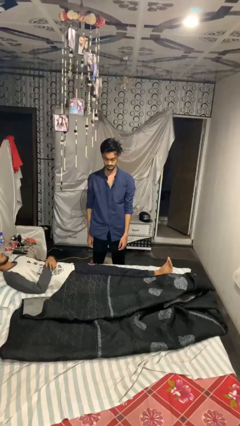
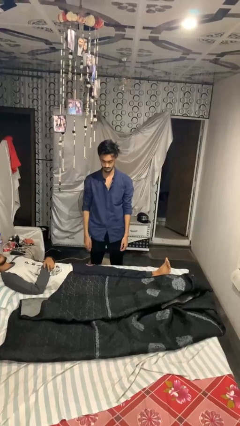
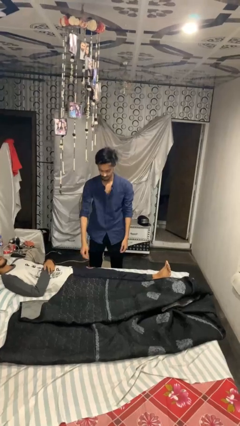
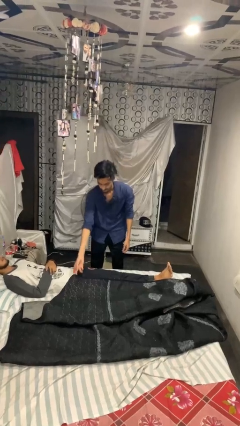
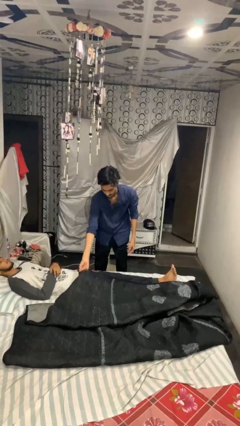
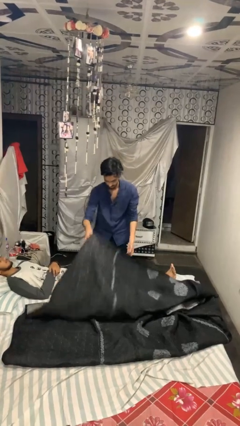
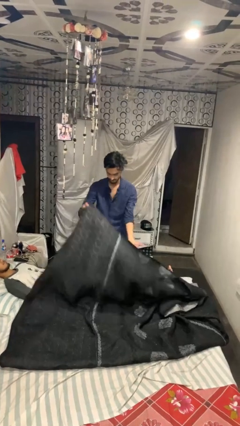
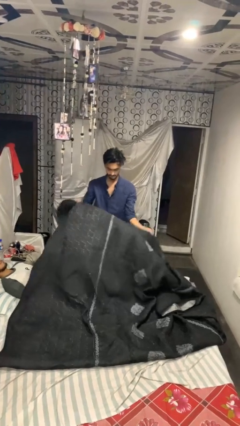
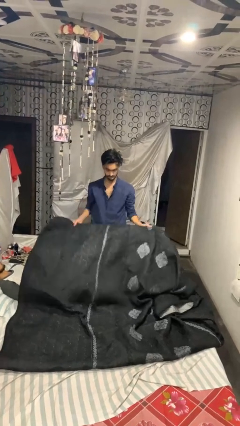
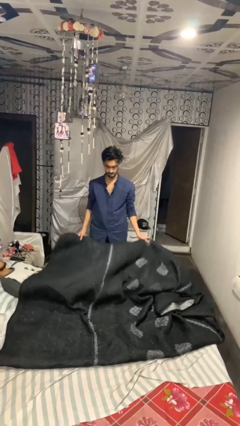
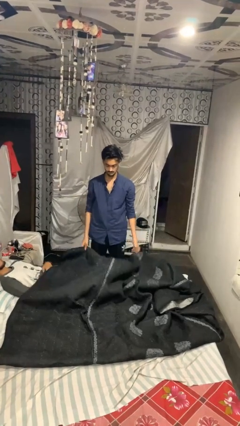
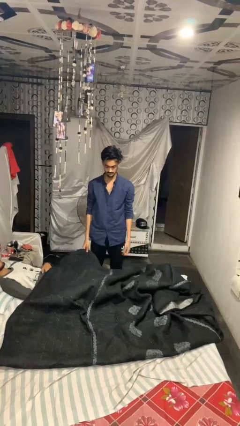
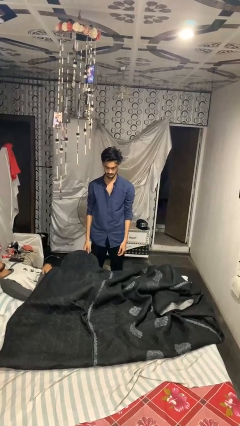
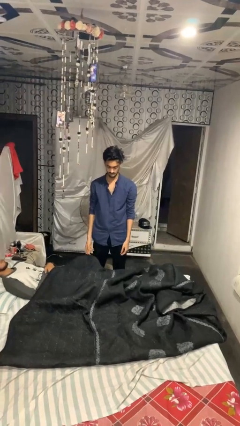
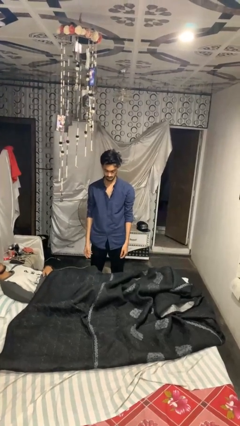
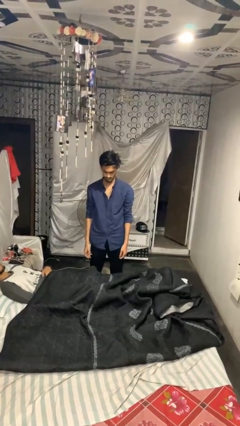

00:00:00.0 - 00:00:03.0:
person covers friend with blanket

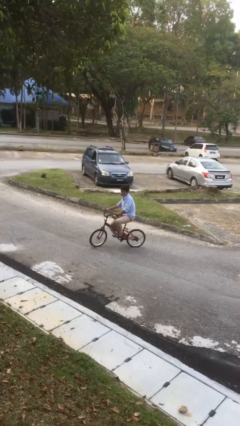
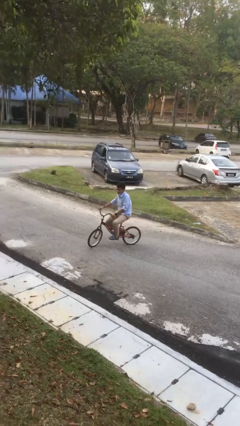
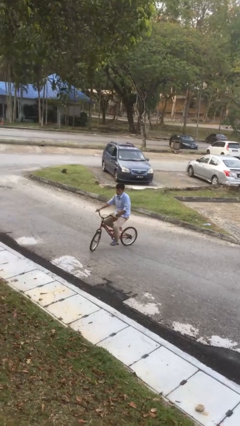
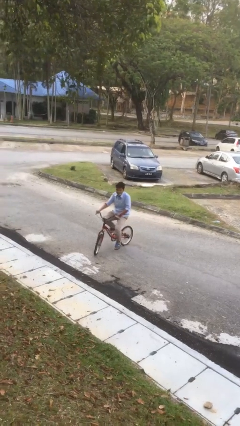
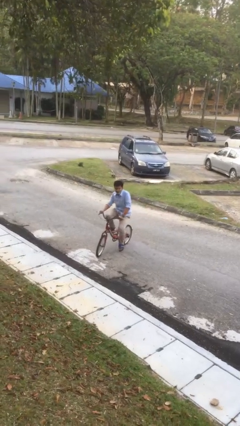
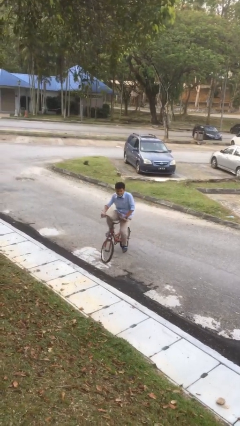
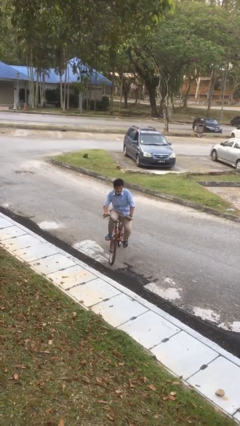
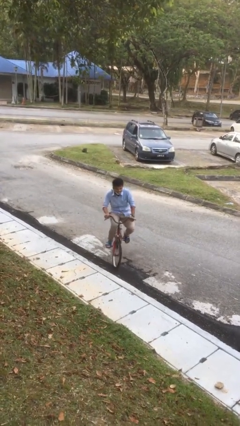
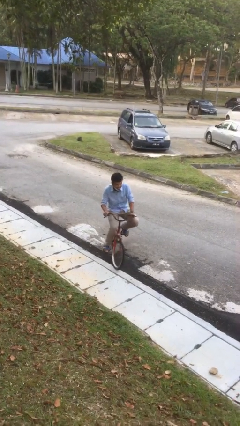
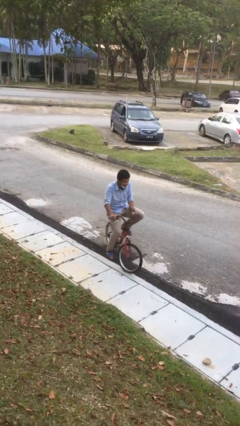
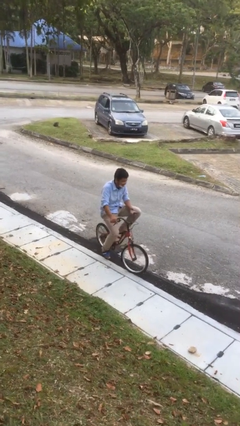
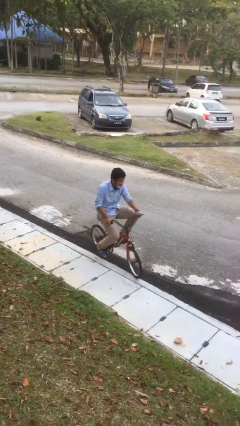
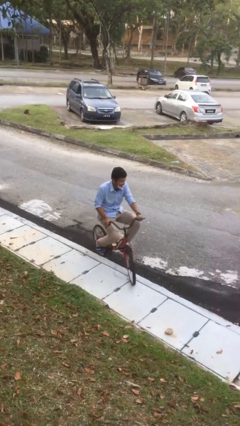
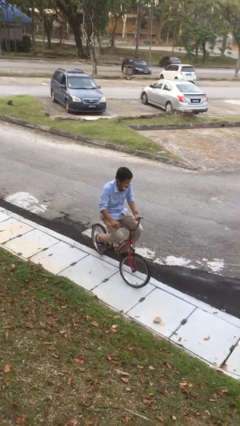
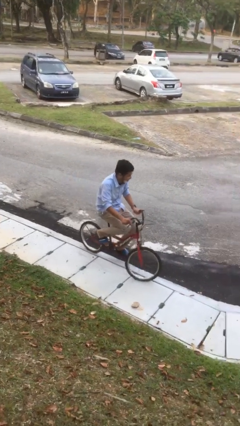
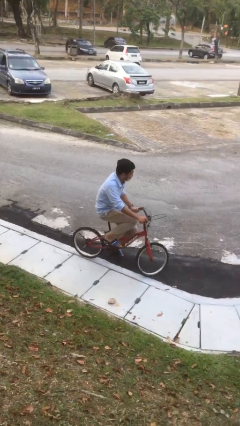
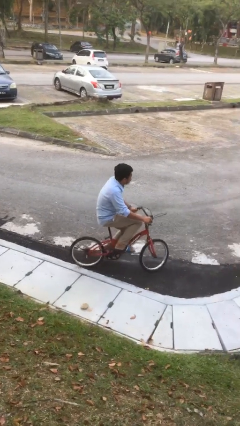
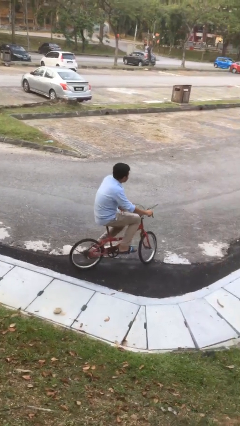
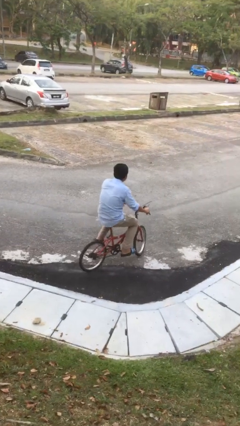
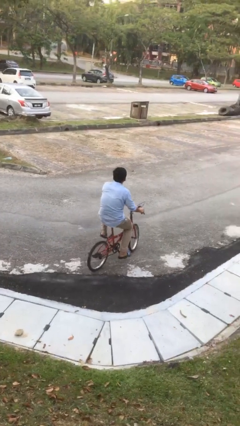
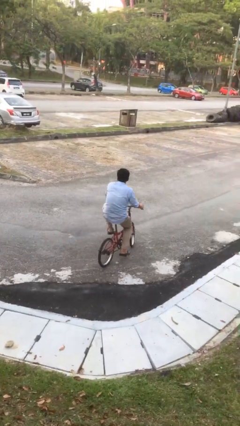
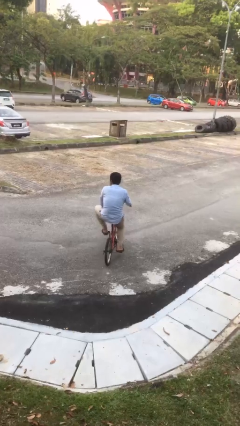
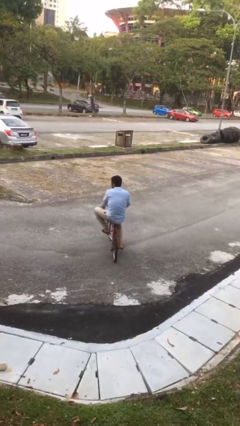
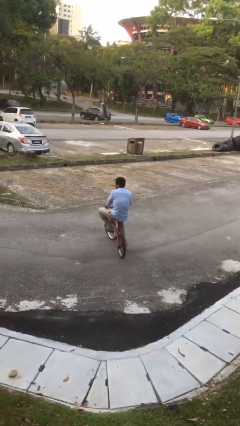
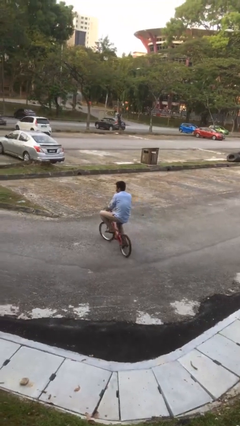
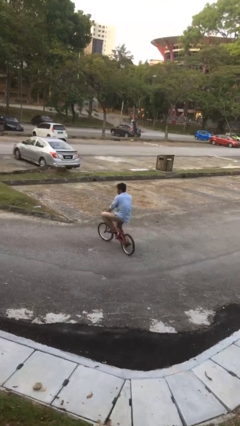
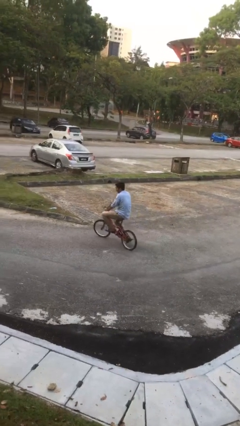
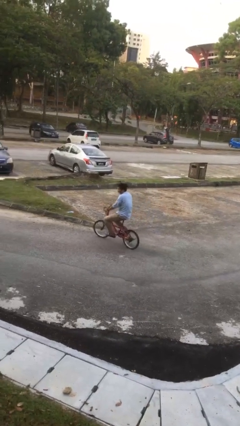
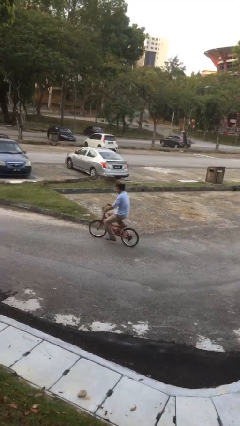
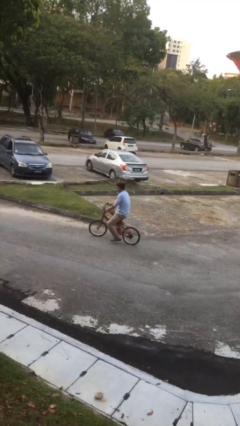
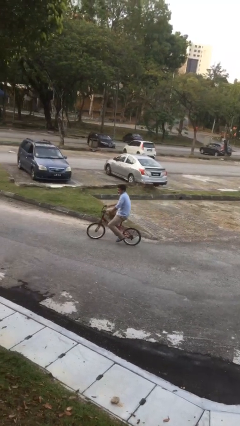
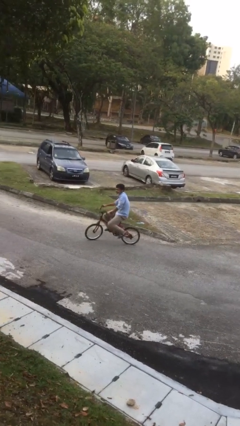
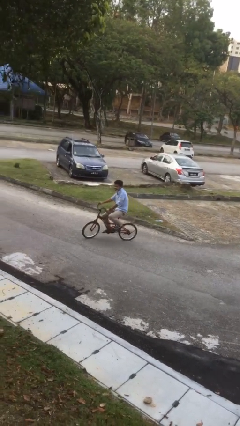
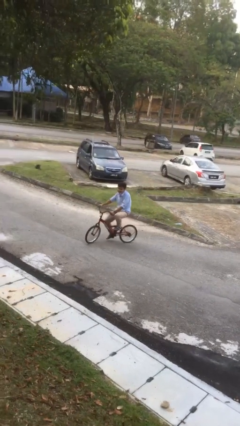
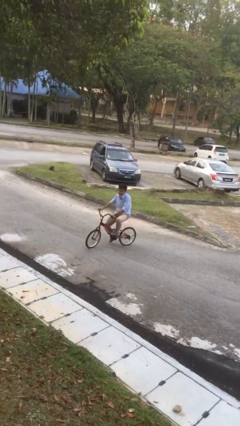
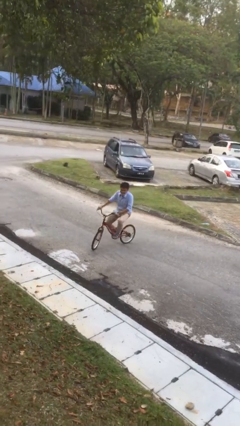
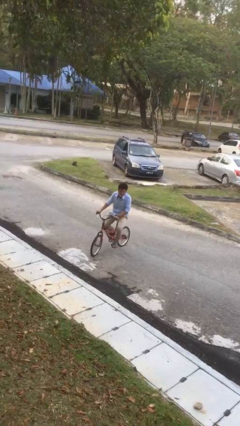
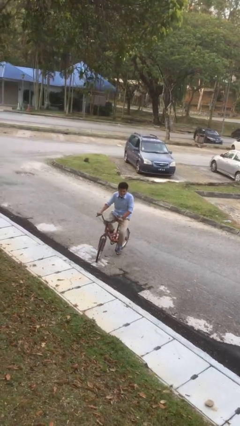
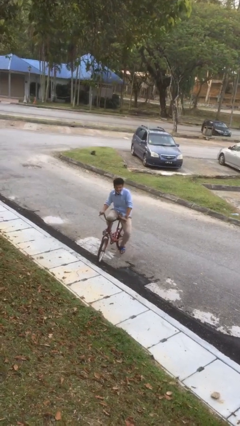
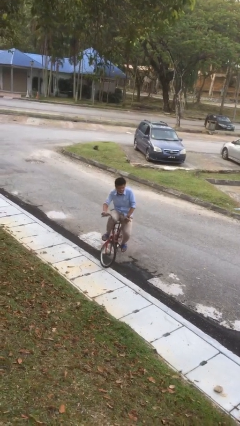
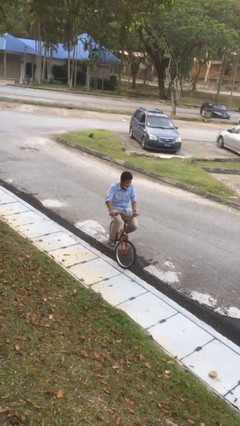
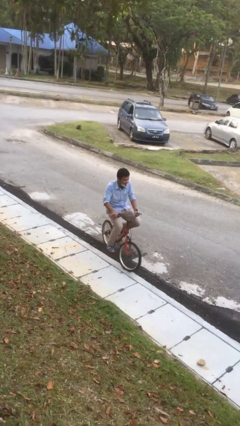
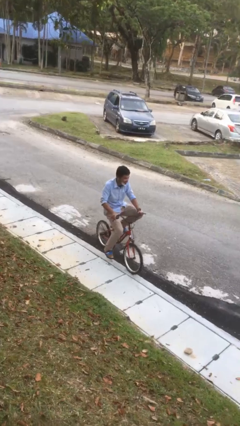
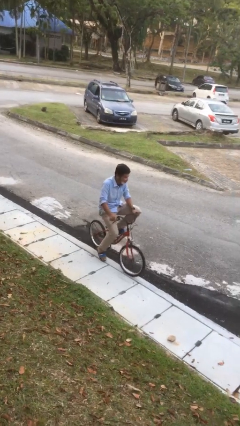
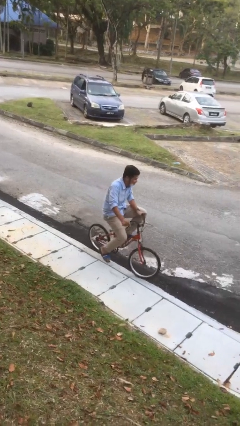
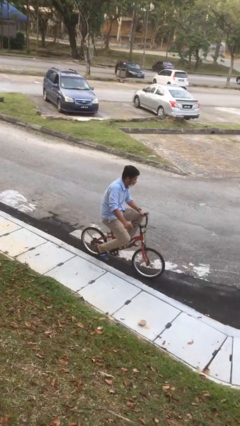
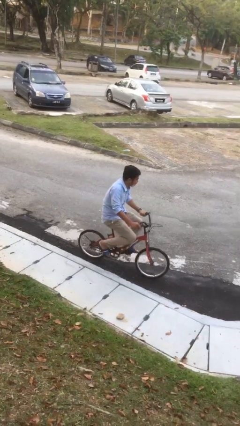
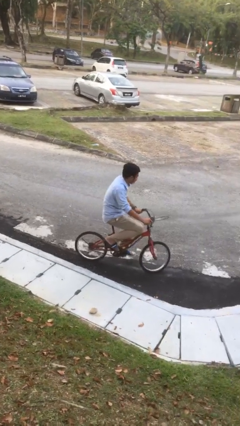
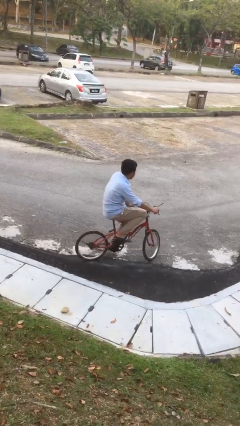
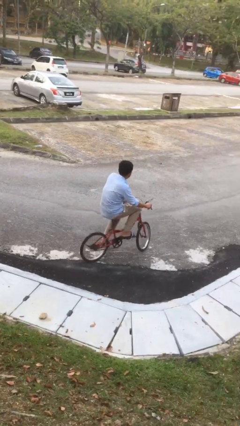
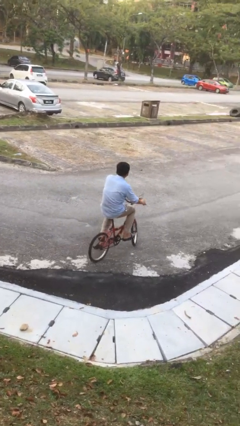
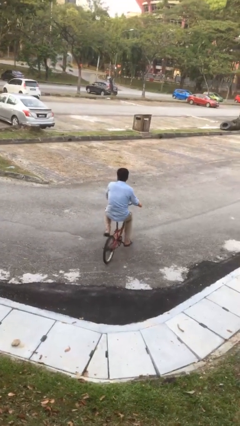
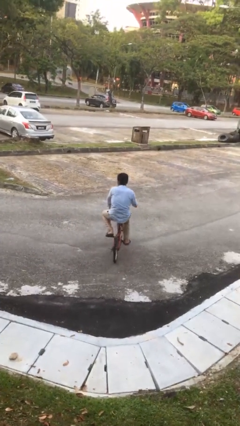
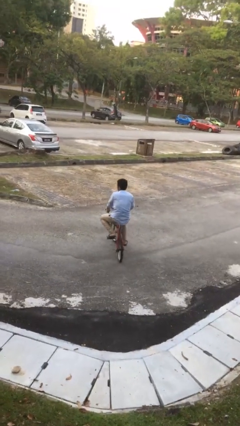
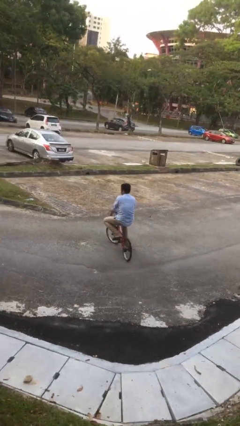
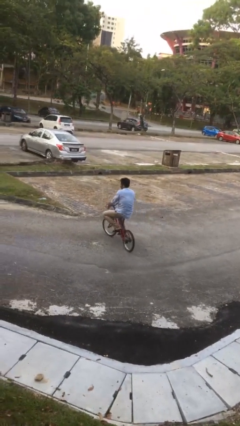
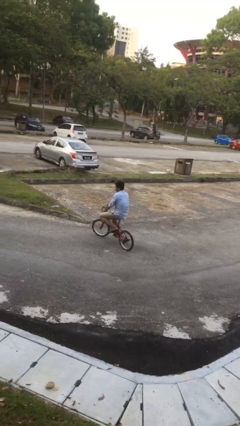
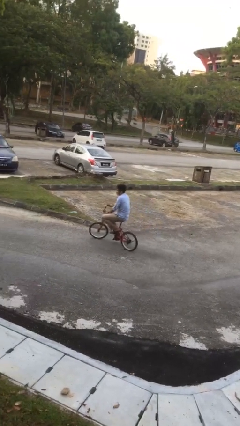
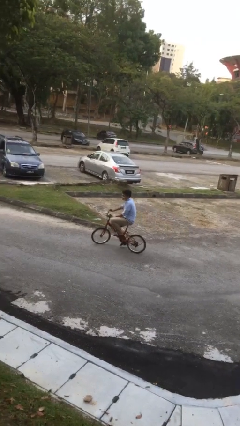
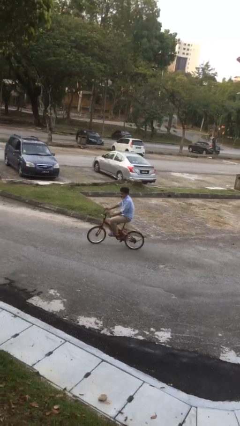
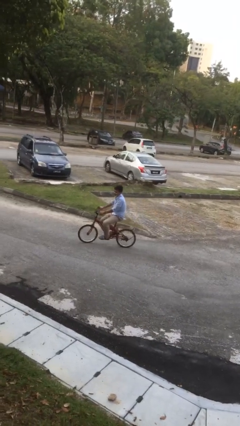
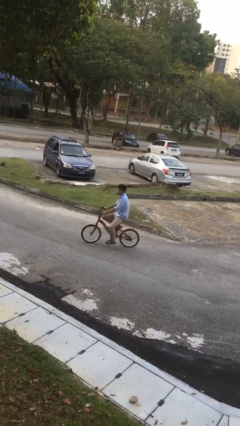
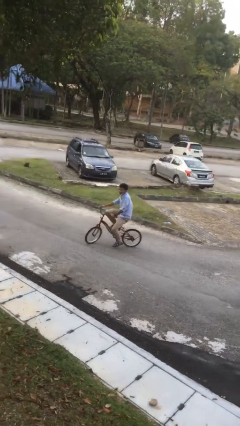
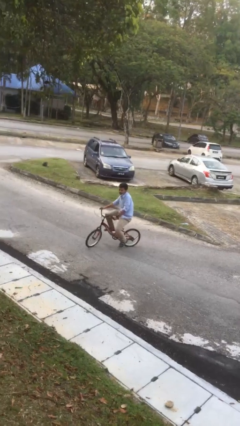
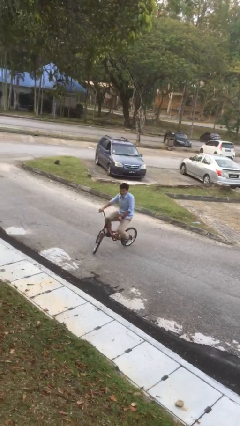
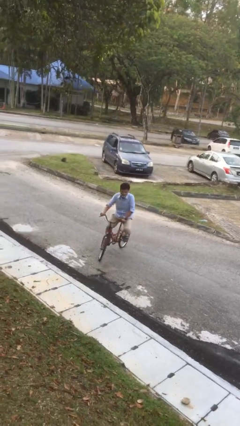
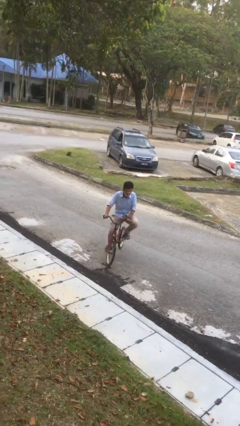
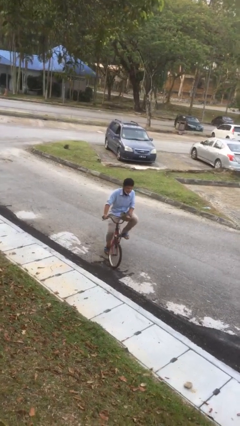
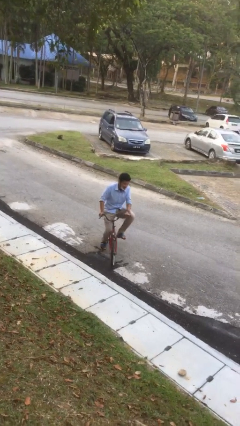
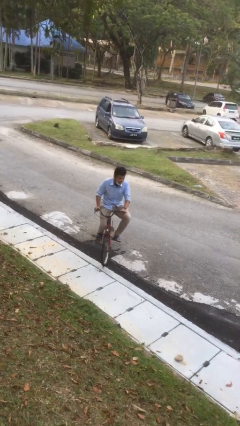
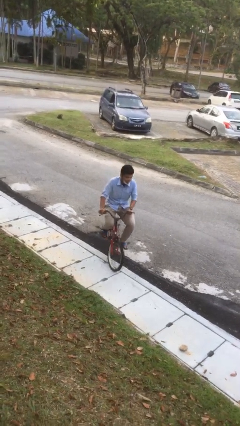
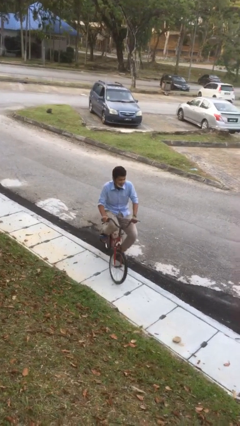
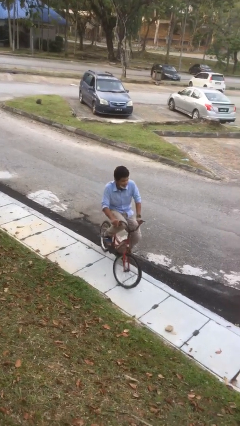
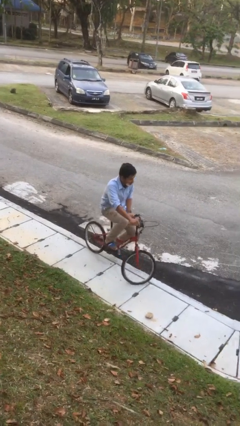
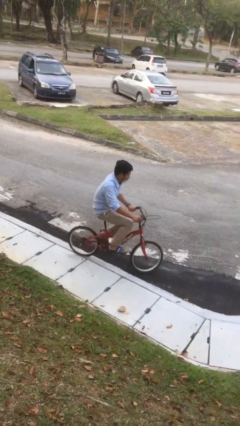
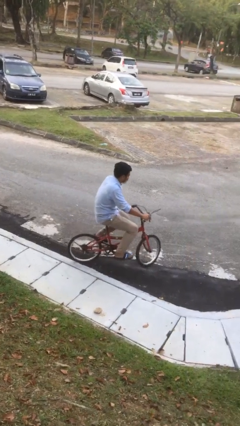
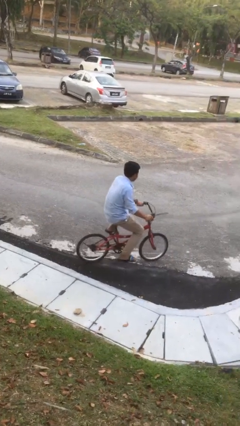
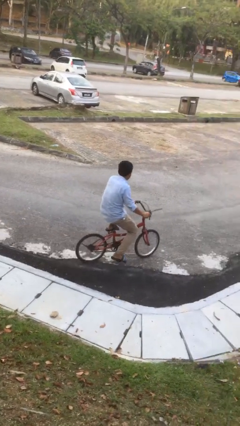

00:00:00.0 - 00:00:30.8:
person rides bicycle
